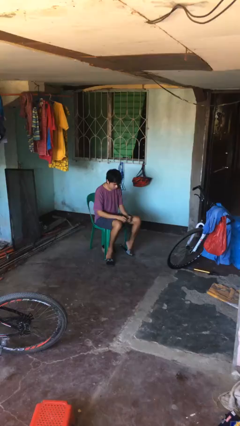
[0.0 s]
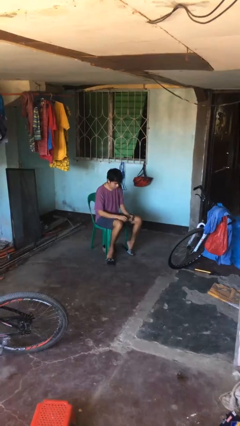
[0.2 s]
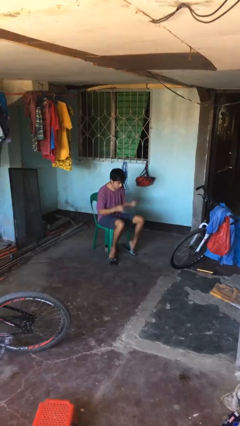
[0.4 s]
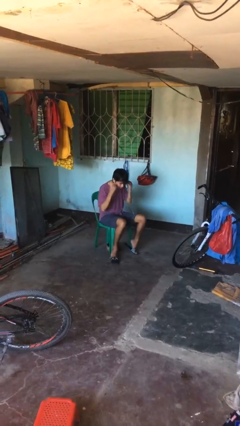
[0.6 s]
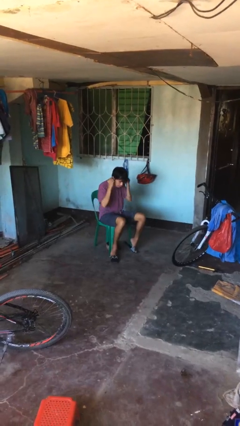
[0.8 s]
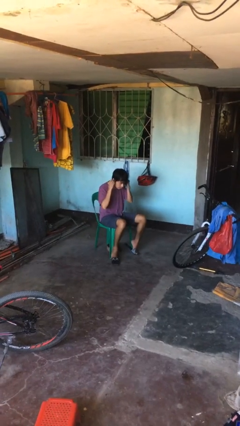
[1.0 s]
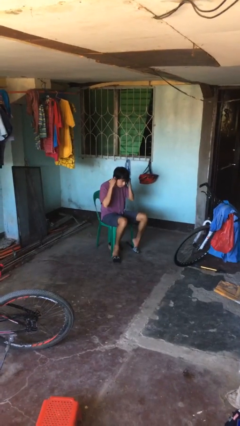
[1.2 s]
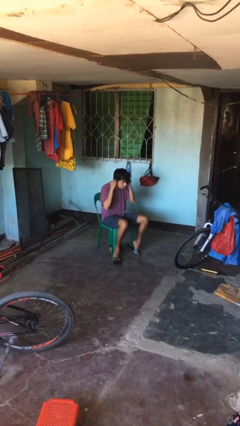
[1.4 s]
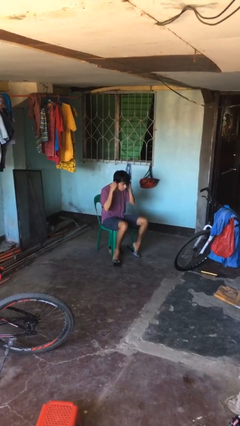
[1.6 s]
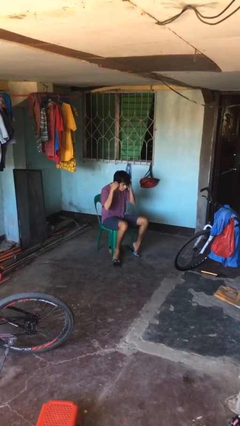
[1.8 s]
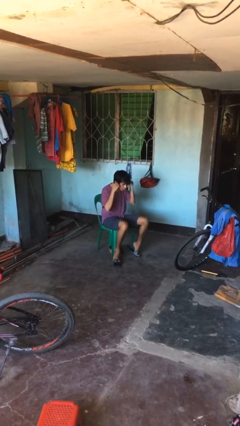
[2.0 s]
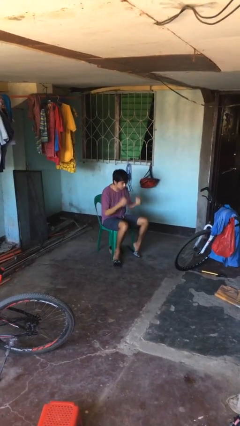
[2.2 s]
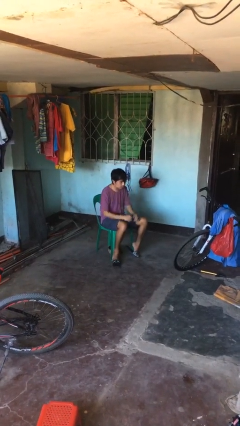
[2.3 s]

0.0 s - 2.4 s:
person puts on headphones

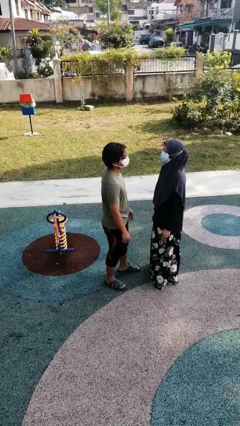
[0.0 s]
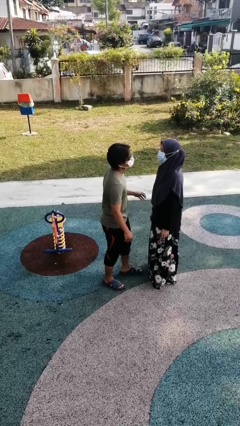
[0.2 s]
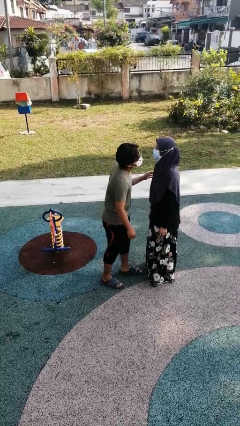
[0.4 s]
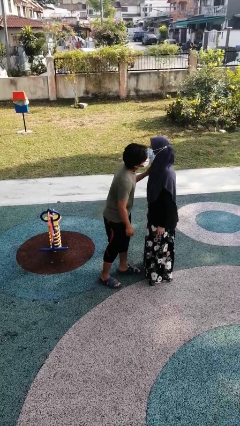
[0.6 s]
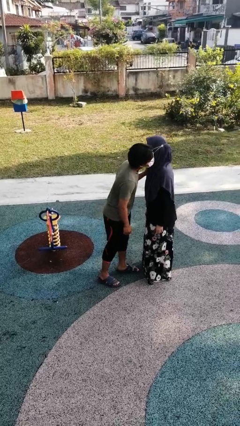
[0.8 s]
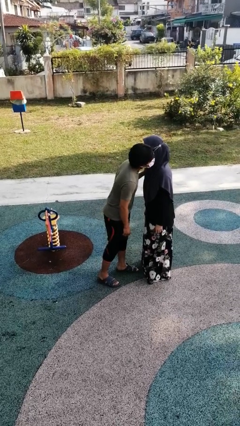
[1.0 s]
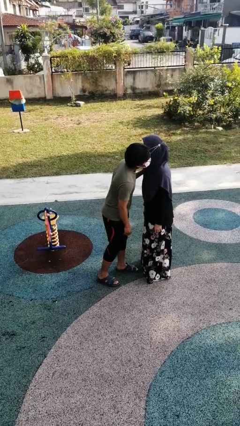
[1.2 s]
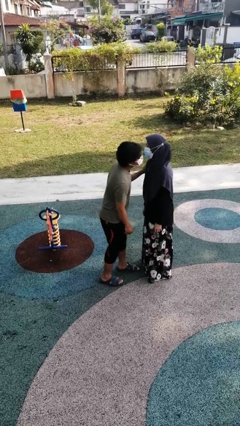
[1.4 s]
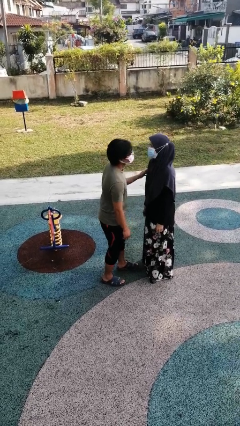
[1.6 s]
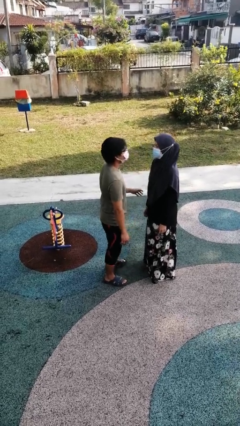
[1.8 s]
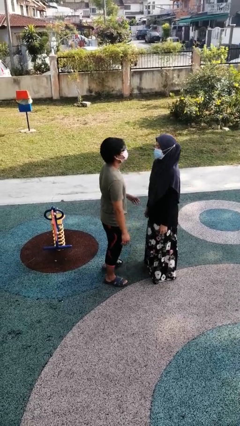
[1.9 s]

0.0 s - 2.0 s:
person kisses cheek of person

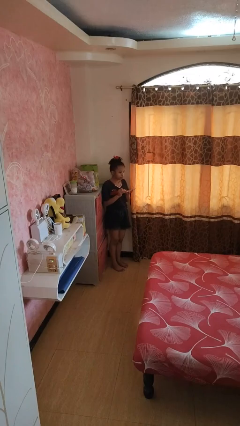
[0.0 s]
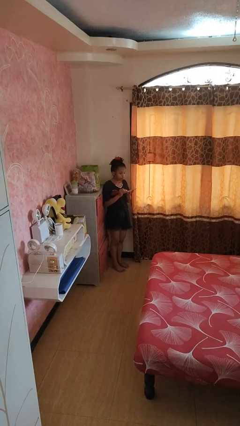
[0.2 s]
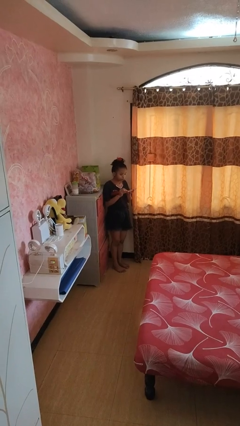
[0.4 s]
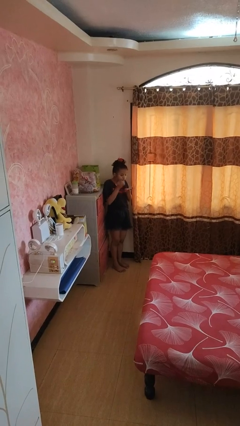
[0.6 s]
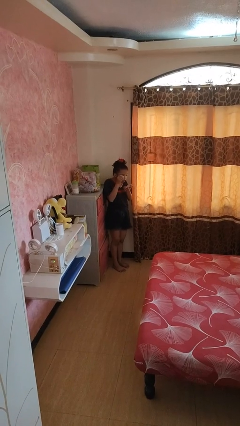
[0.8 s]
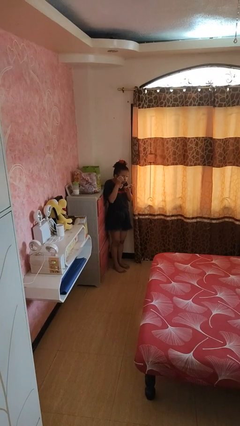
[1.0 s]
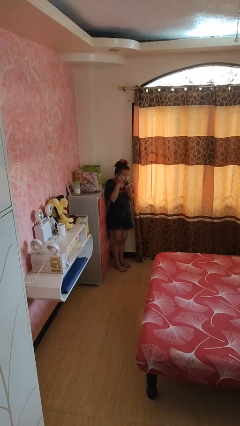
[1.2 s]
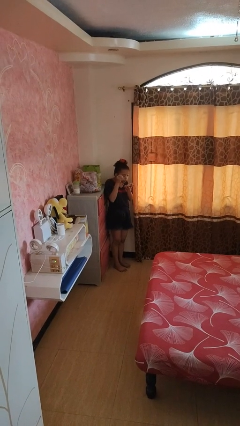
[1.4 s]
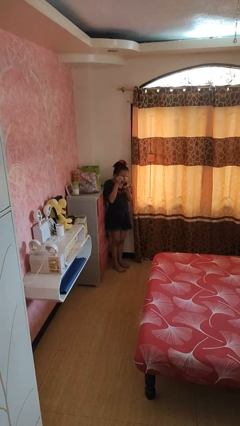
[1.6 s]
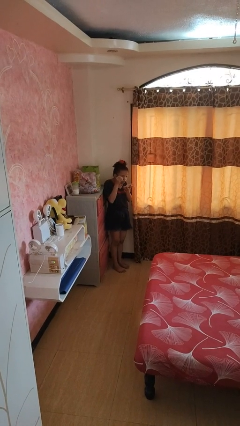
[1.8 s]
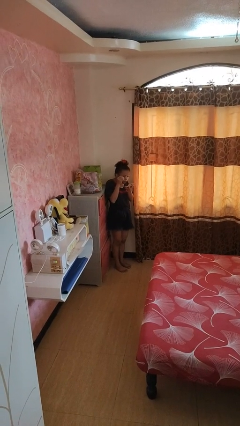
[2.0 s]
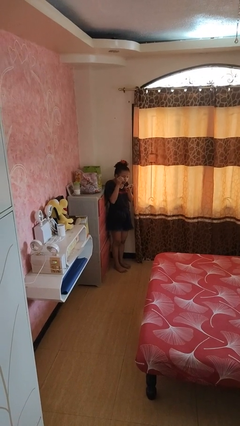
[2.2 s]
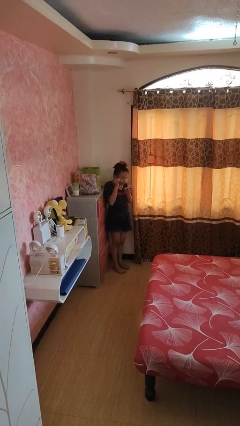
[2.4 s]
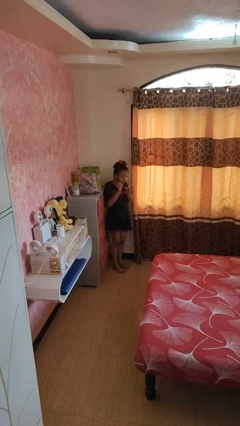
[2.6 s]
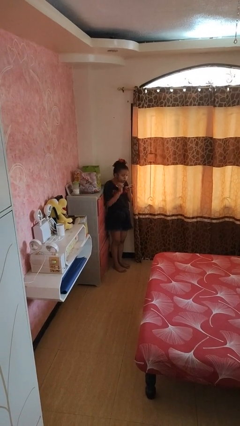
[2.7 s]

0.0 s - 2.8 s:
person applies eye makeup

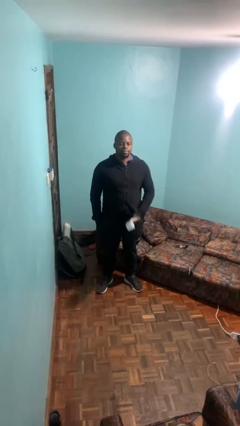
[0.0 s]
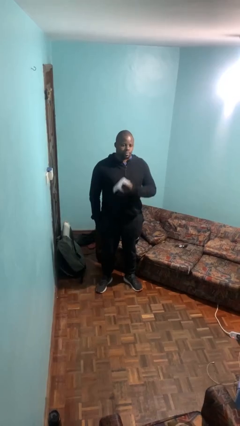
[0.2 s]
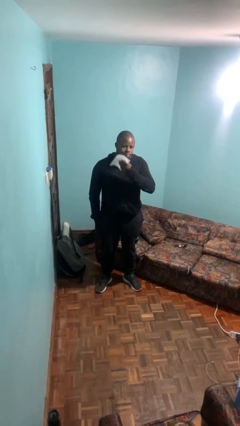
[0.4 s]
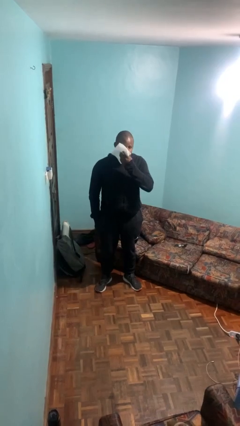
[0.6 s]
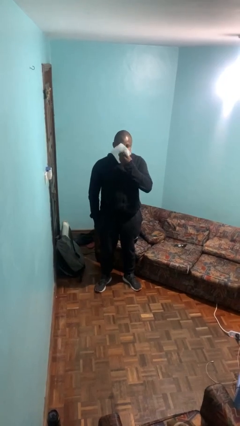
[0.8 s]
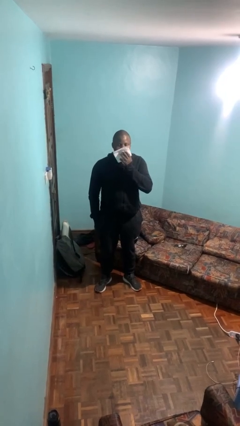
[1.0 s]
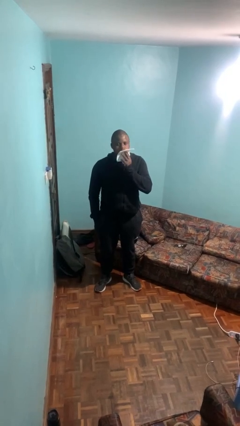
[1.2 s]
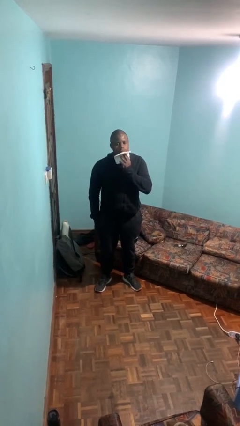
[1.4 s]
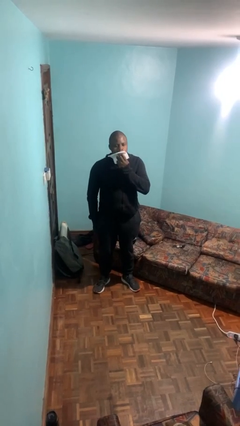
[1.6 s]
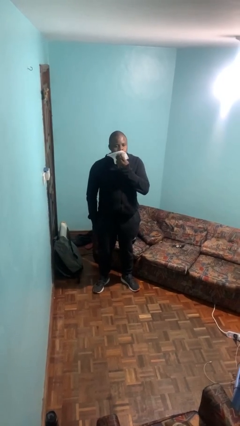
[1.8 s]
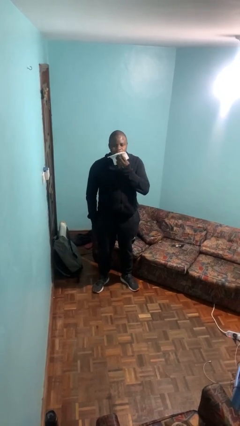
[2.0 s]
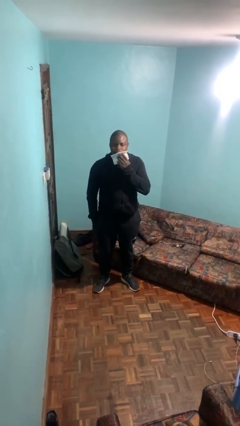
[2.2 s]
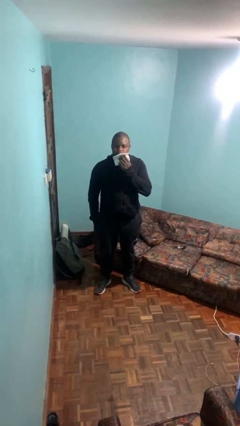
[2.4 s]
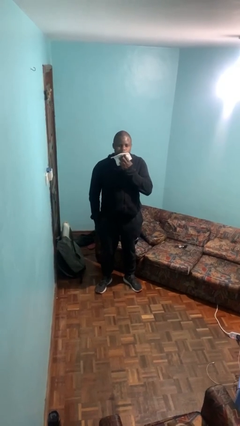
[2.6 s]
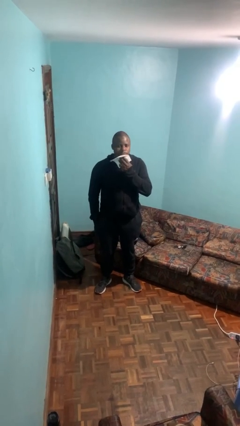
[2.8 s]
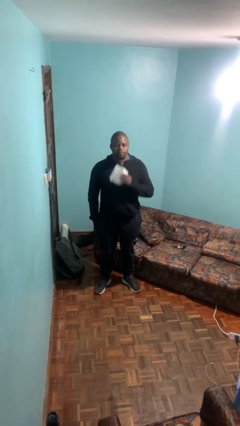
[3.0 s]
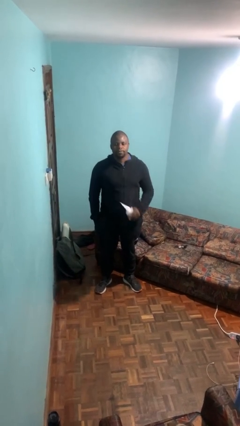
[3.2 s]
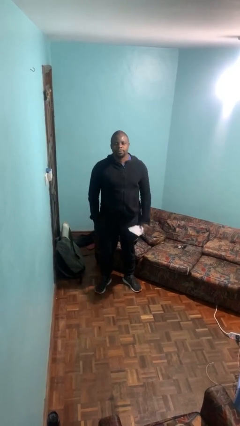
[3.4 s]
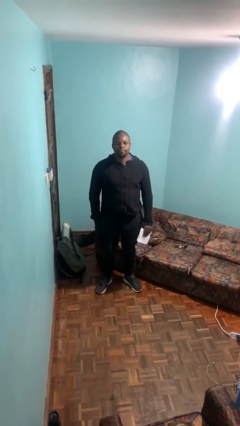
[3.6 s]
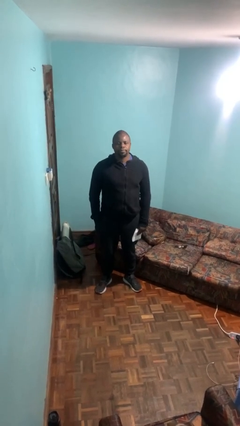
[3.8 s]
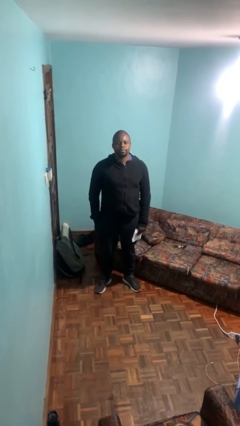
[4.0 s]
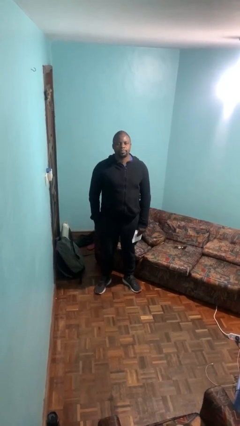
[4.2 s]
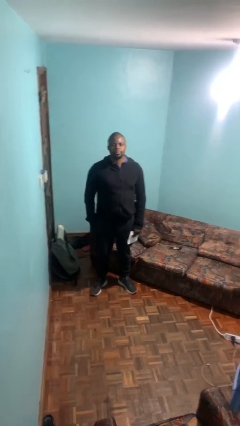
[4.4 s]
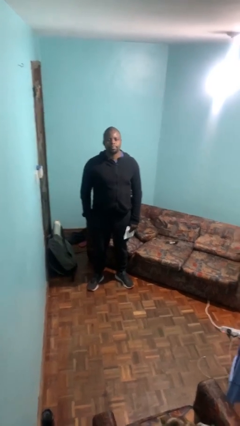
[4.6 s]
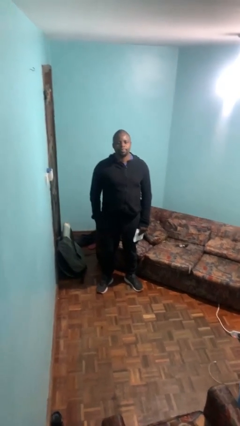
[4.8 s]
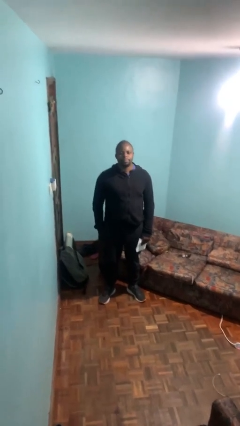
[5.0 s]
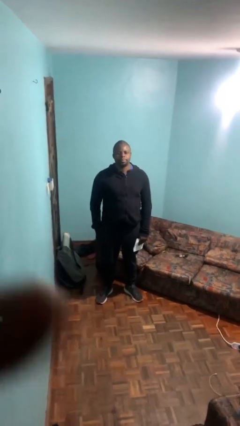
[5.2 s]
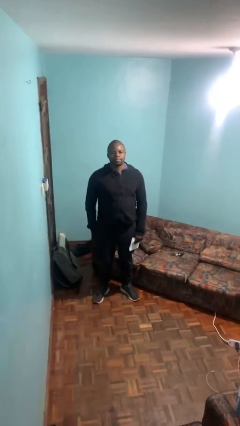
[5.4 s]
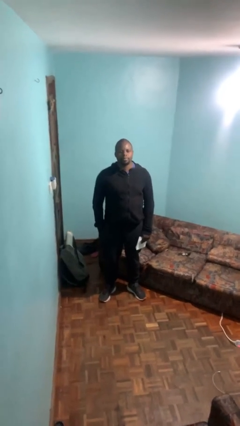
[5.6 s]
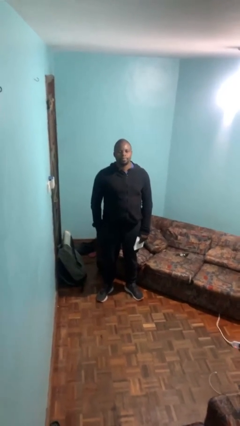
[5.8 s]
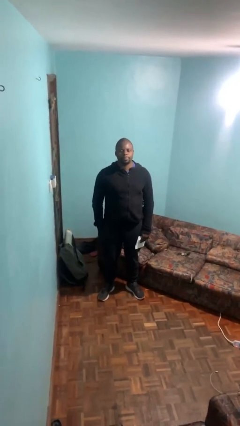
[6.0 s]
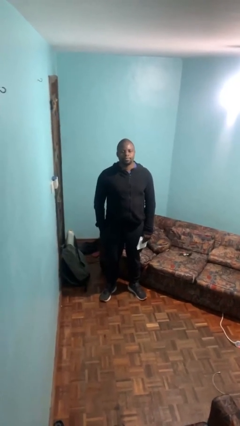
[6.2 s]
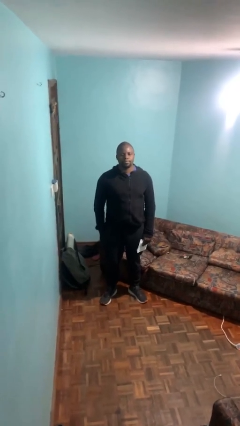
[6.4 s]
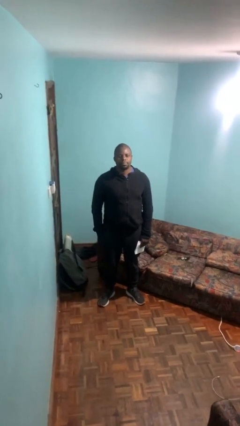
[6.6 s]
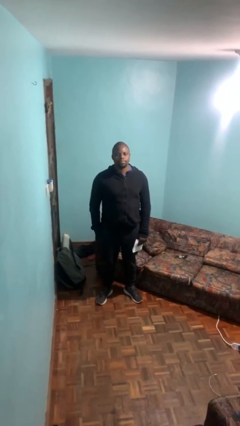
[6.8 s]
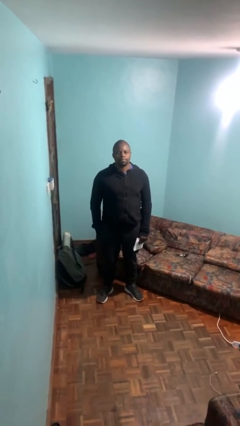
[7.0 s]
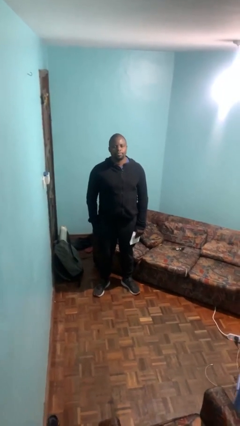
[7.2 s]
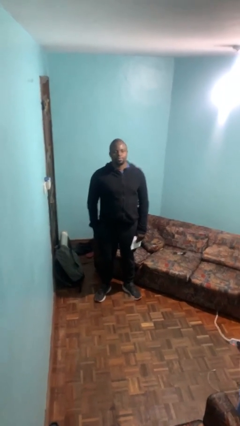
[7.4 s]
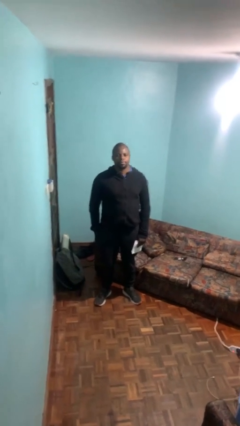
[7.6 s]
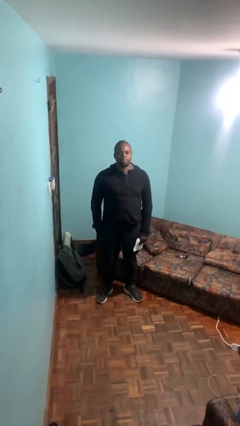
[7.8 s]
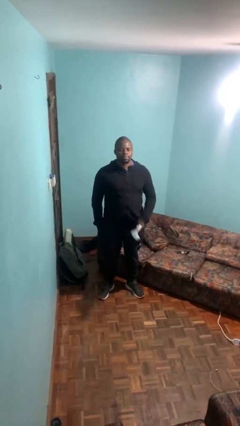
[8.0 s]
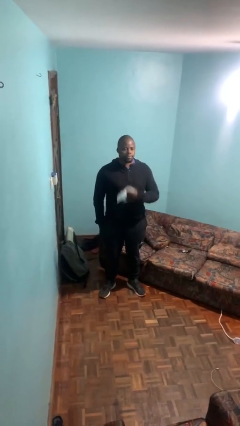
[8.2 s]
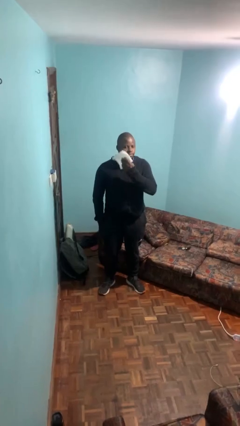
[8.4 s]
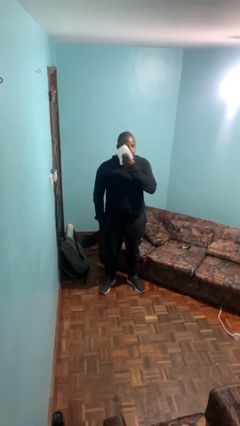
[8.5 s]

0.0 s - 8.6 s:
person wipes mouth with napkin

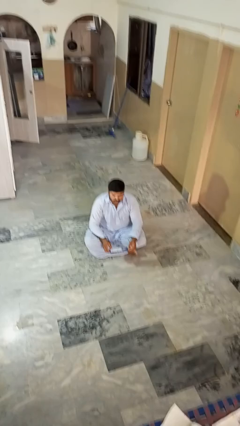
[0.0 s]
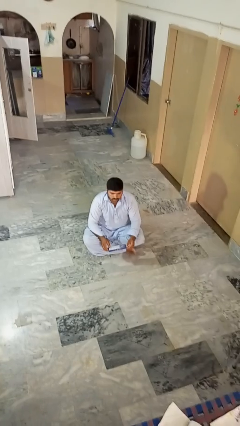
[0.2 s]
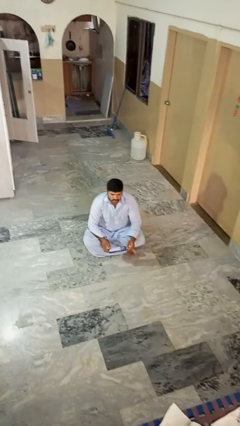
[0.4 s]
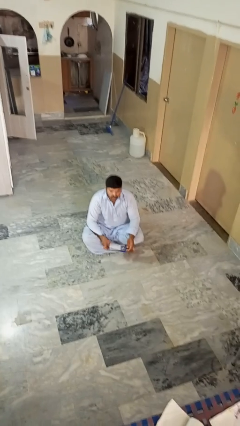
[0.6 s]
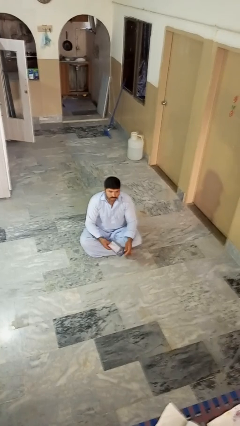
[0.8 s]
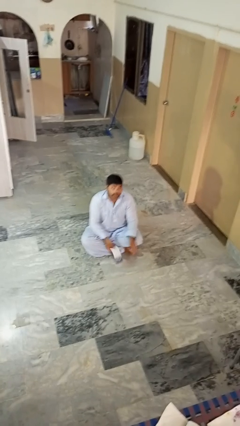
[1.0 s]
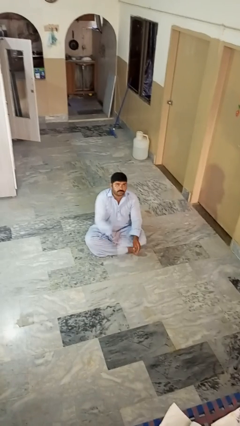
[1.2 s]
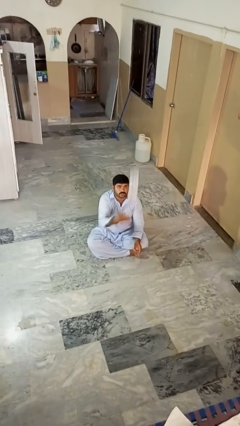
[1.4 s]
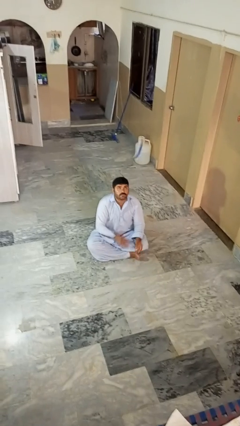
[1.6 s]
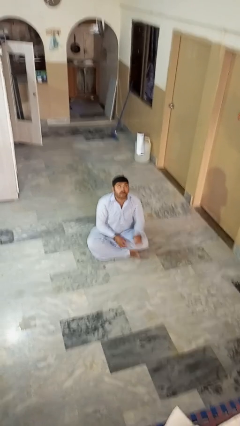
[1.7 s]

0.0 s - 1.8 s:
person drops object

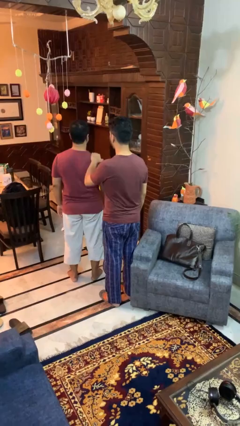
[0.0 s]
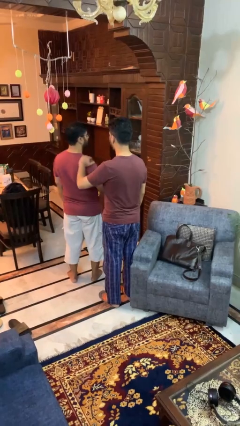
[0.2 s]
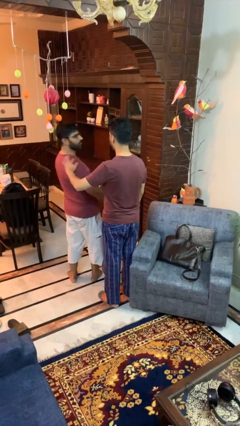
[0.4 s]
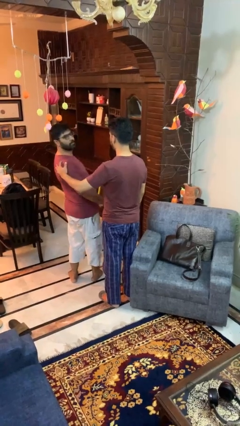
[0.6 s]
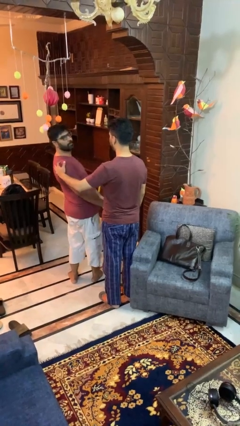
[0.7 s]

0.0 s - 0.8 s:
person spins person around
